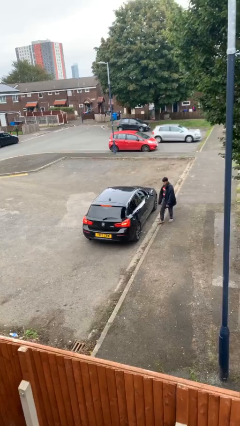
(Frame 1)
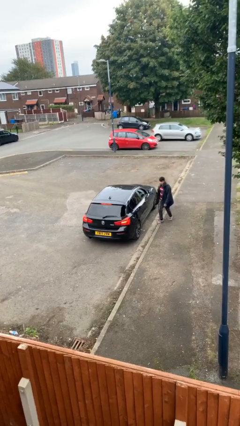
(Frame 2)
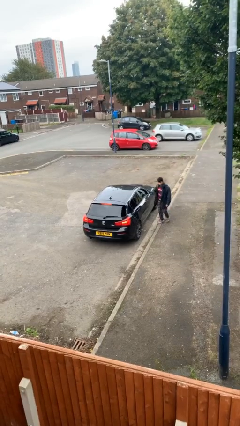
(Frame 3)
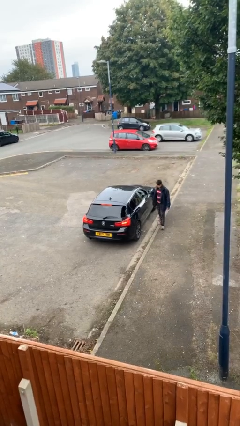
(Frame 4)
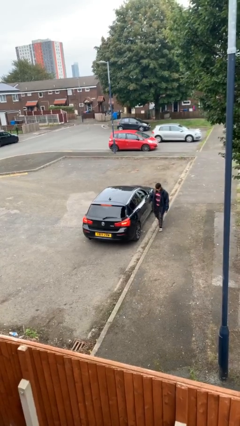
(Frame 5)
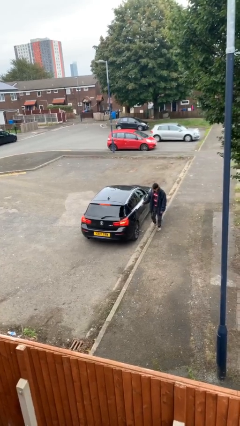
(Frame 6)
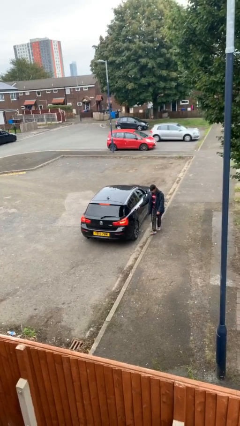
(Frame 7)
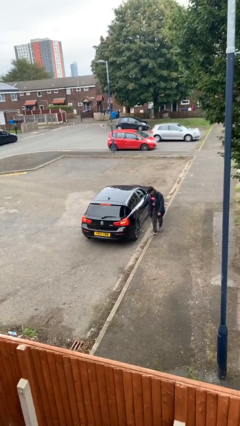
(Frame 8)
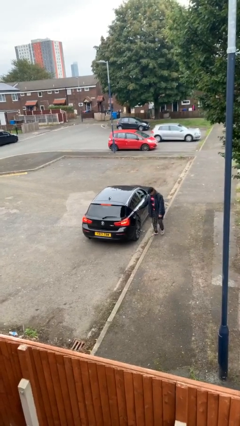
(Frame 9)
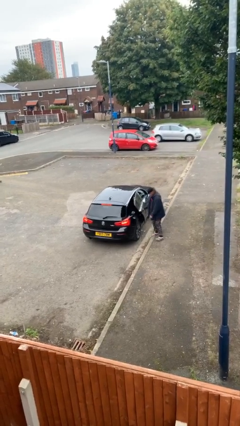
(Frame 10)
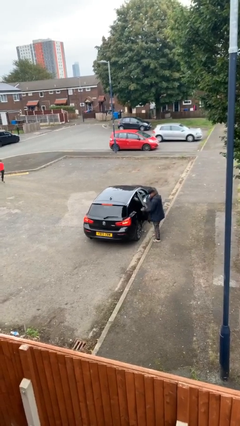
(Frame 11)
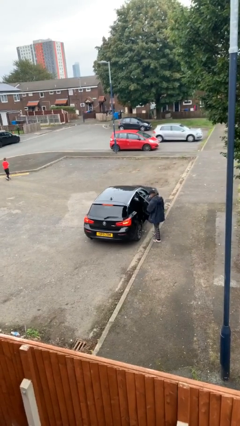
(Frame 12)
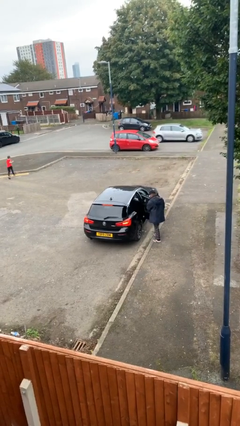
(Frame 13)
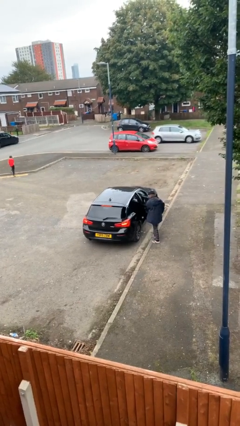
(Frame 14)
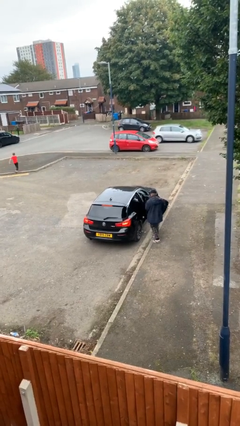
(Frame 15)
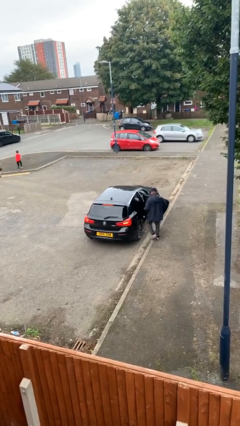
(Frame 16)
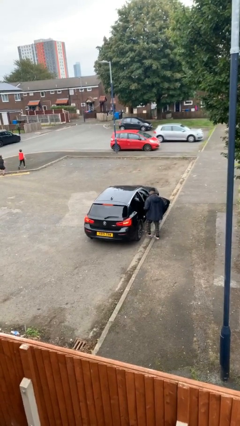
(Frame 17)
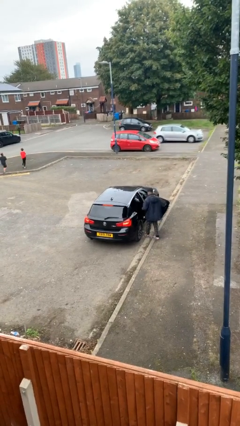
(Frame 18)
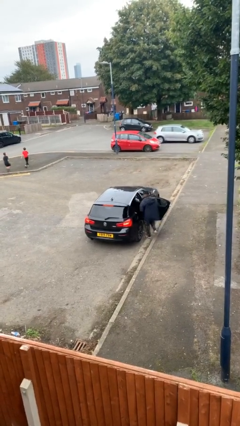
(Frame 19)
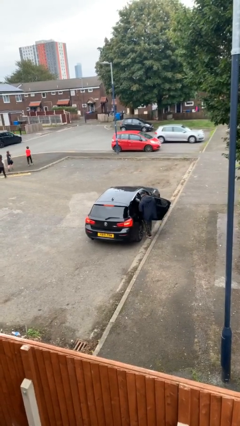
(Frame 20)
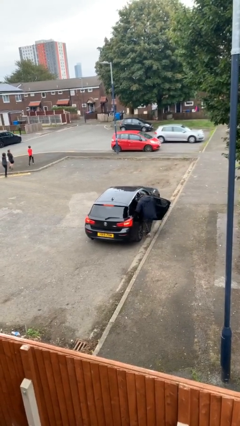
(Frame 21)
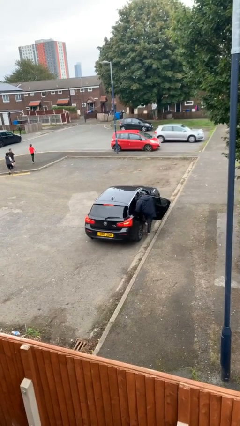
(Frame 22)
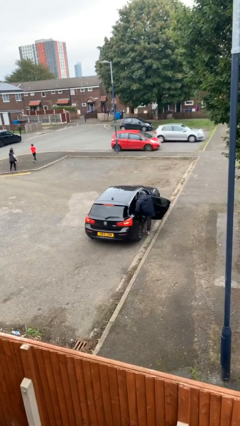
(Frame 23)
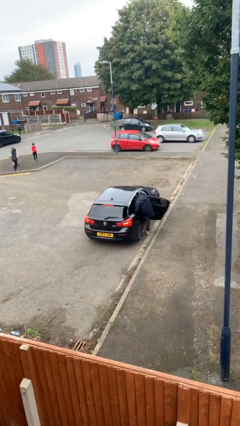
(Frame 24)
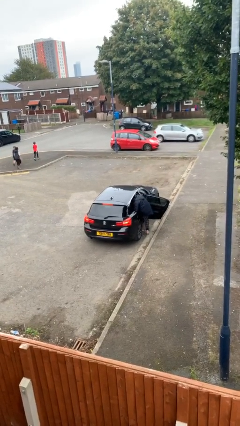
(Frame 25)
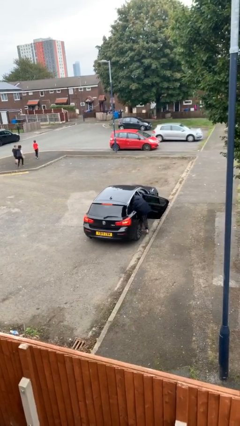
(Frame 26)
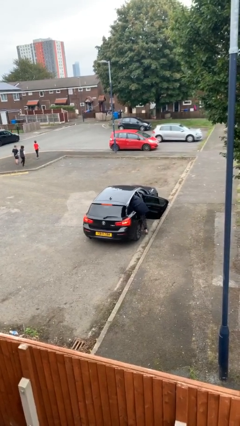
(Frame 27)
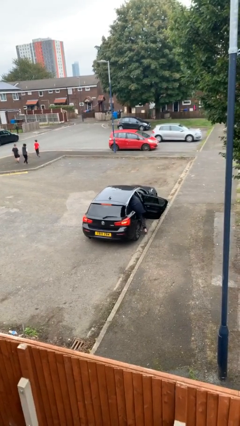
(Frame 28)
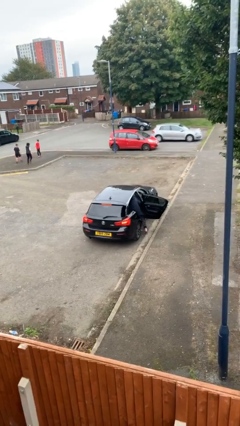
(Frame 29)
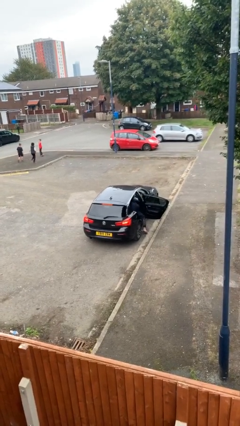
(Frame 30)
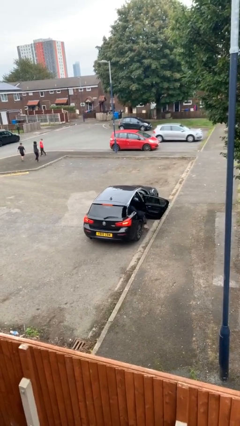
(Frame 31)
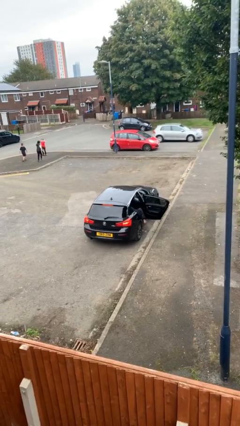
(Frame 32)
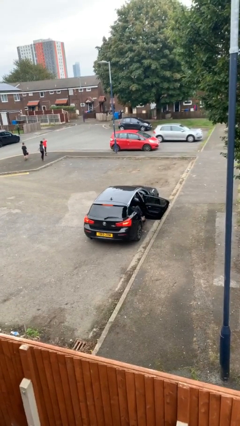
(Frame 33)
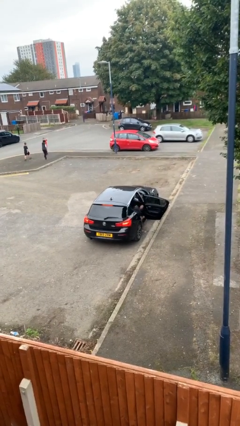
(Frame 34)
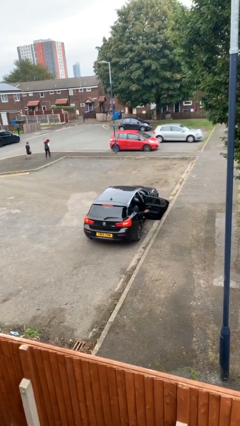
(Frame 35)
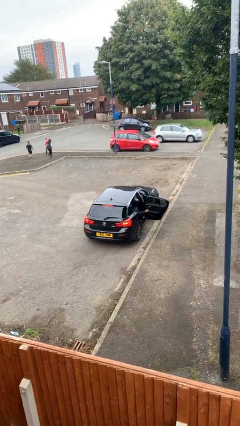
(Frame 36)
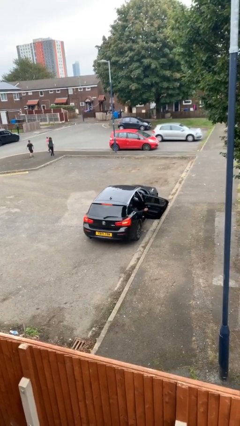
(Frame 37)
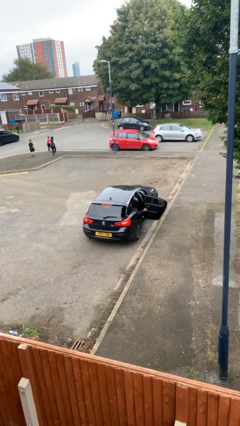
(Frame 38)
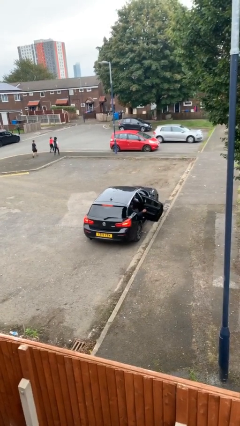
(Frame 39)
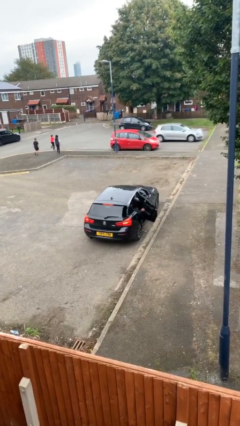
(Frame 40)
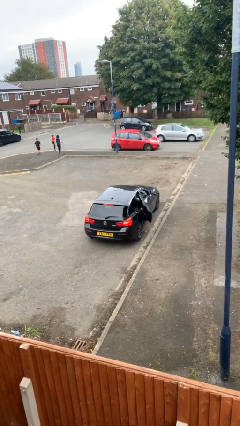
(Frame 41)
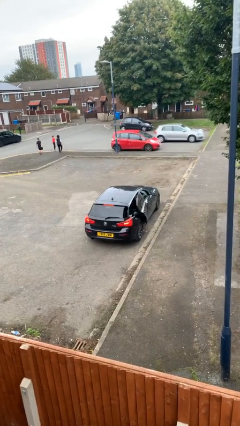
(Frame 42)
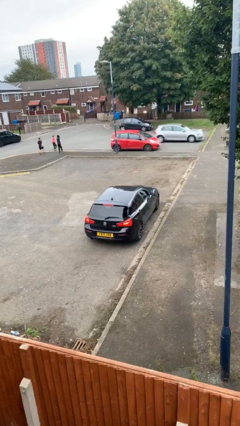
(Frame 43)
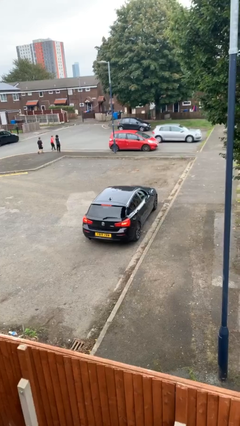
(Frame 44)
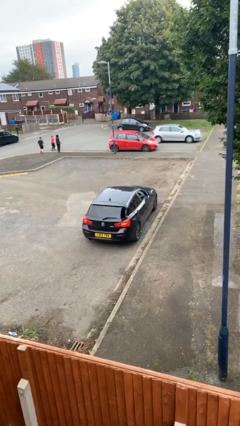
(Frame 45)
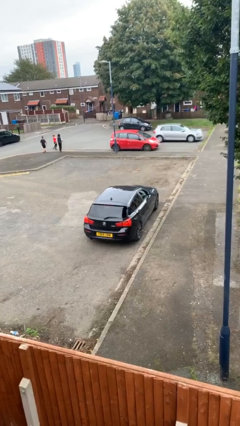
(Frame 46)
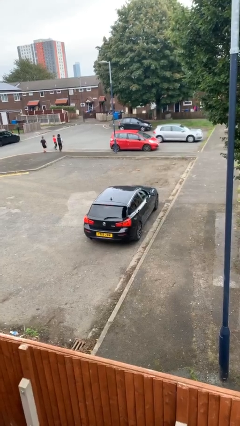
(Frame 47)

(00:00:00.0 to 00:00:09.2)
car picks up person

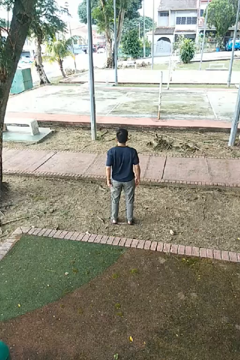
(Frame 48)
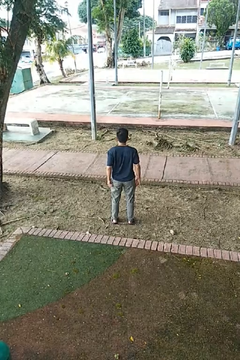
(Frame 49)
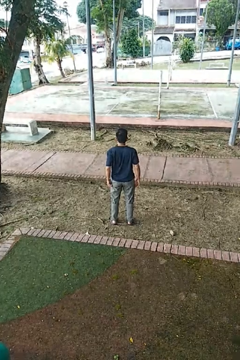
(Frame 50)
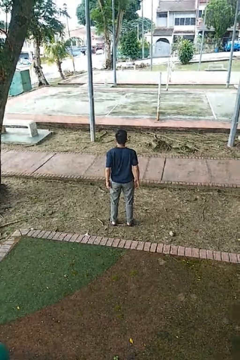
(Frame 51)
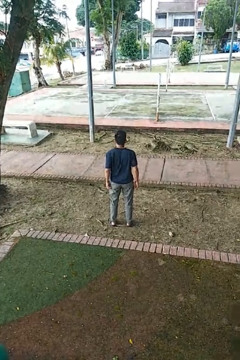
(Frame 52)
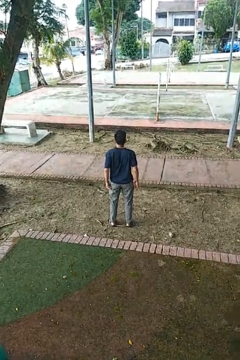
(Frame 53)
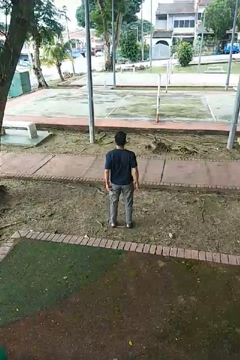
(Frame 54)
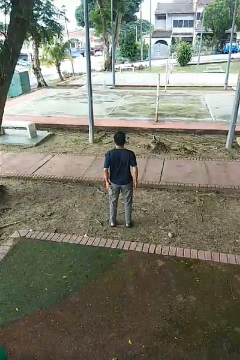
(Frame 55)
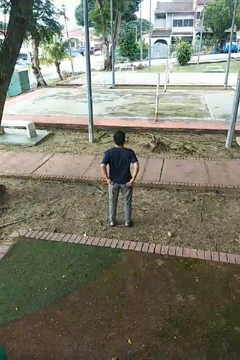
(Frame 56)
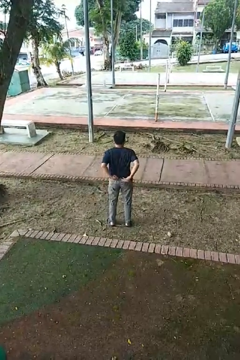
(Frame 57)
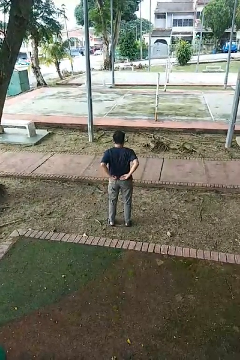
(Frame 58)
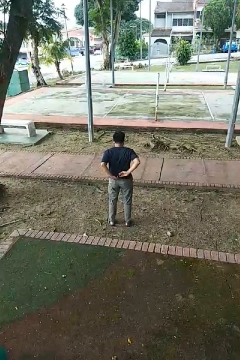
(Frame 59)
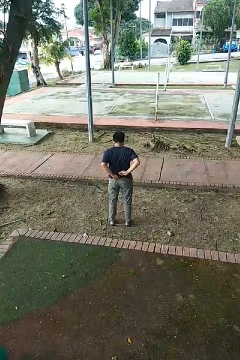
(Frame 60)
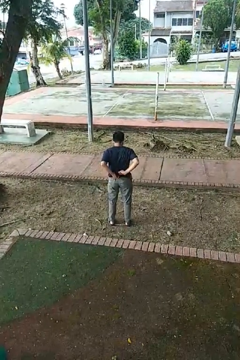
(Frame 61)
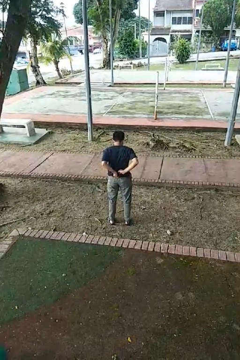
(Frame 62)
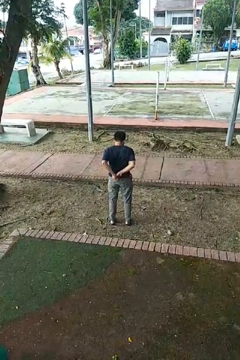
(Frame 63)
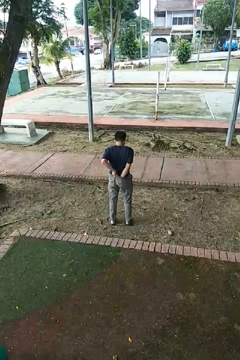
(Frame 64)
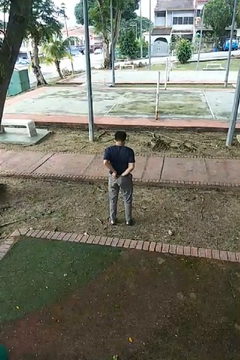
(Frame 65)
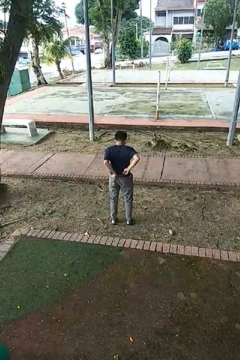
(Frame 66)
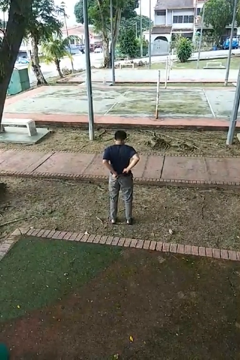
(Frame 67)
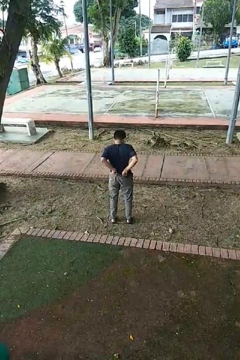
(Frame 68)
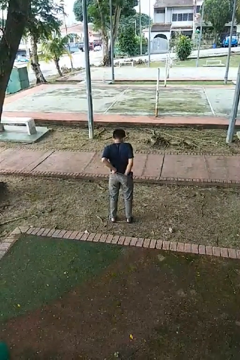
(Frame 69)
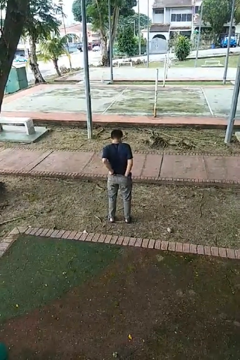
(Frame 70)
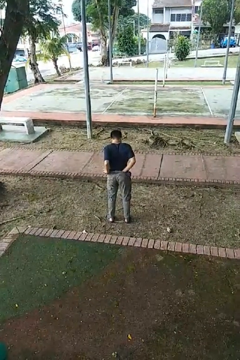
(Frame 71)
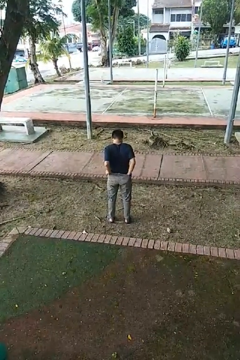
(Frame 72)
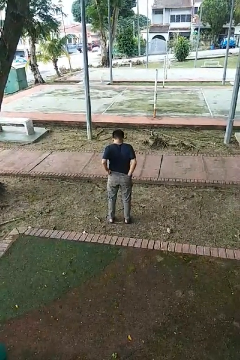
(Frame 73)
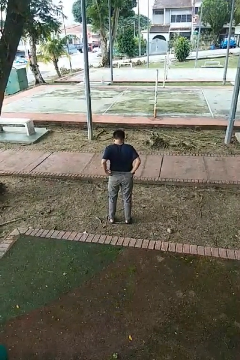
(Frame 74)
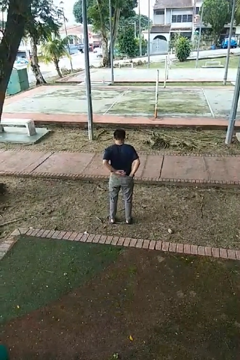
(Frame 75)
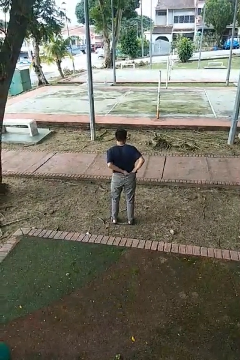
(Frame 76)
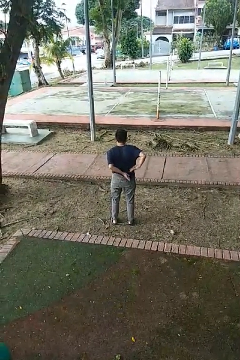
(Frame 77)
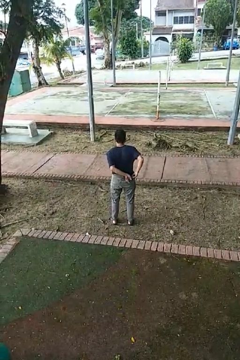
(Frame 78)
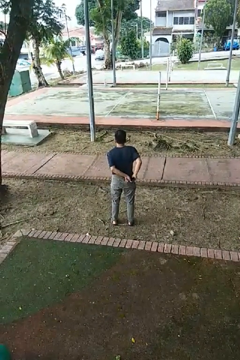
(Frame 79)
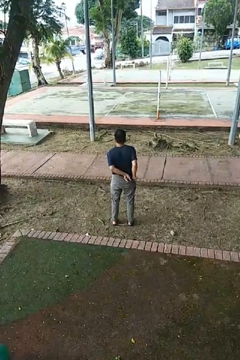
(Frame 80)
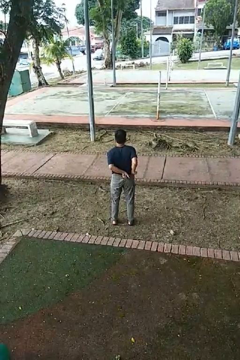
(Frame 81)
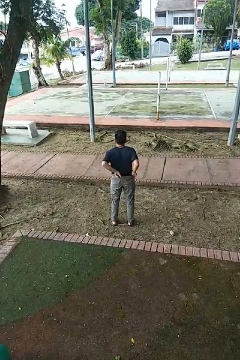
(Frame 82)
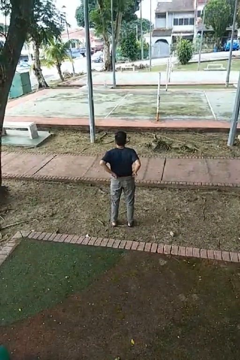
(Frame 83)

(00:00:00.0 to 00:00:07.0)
person tucks in shirt

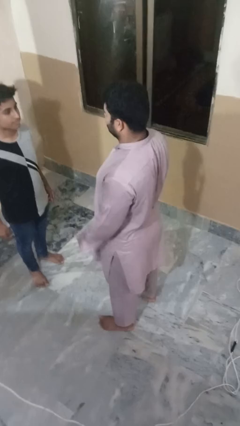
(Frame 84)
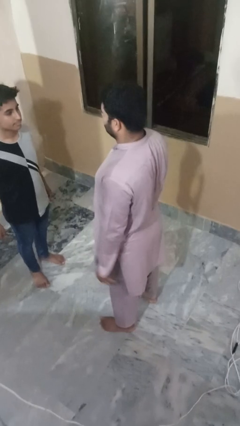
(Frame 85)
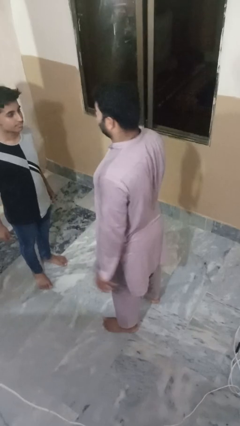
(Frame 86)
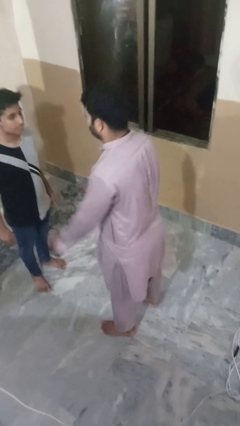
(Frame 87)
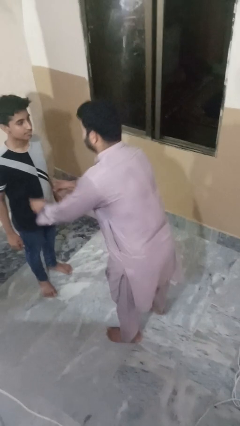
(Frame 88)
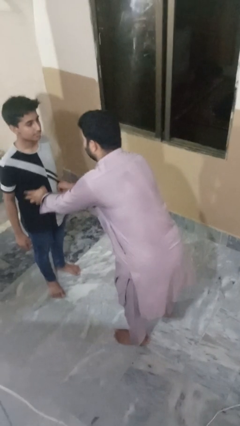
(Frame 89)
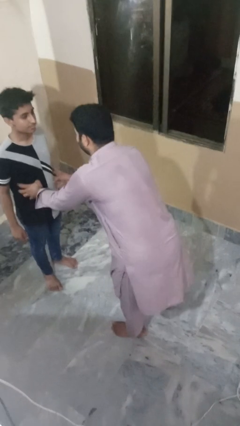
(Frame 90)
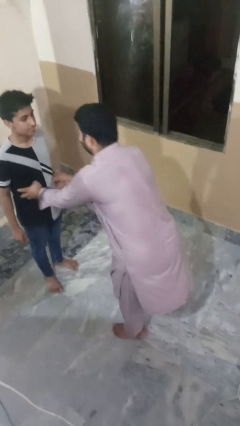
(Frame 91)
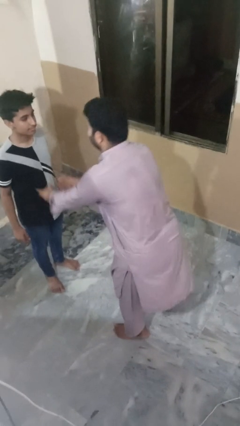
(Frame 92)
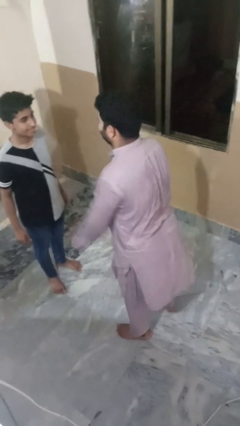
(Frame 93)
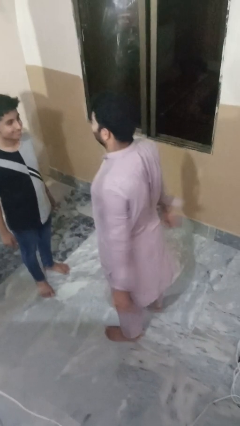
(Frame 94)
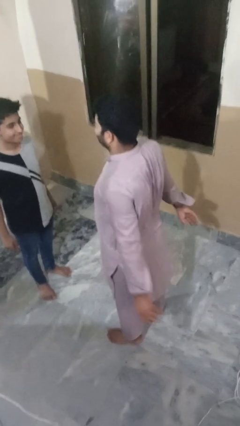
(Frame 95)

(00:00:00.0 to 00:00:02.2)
person tickles person

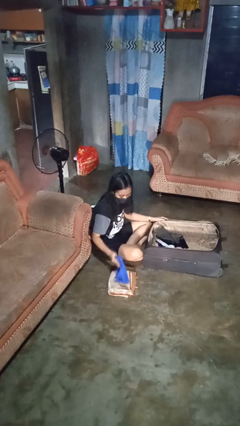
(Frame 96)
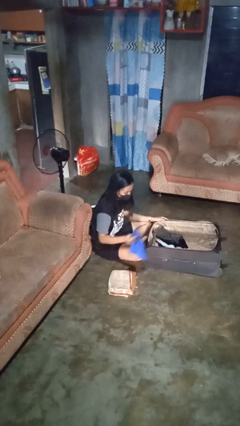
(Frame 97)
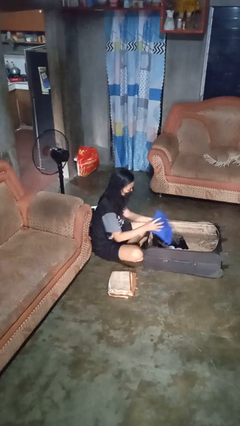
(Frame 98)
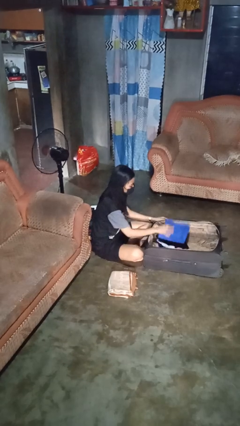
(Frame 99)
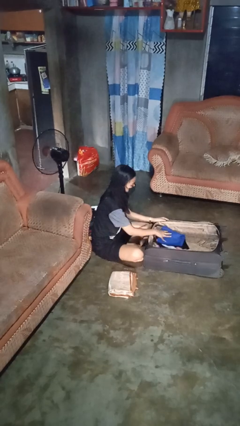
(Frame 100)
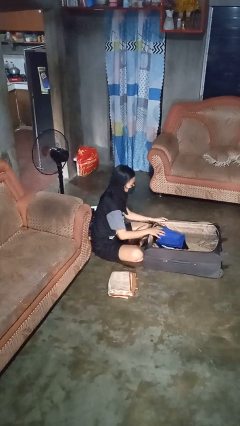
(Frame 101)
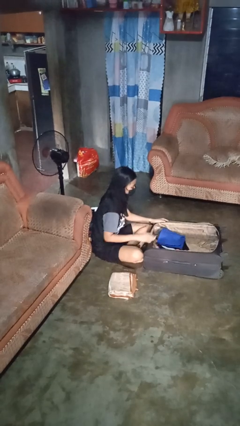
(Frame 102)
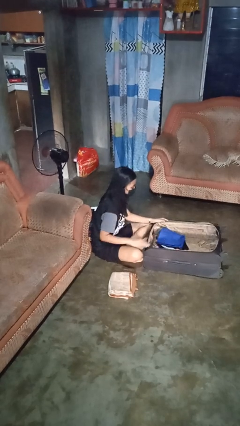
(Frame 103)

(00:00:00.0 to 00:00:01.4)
person loads clothes into suitcase
